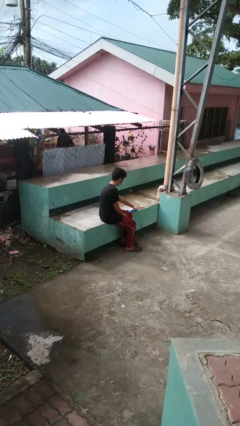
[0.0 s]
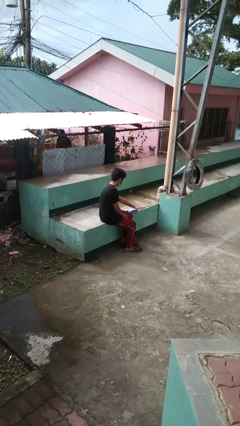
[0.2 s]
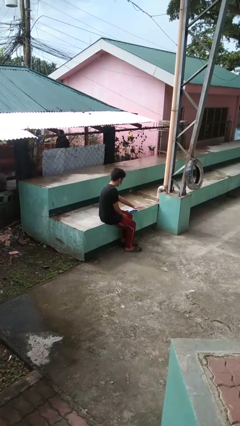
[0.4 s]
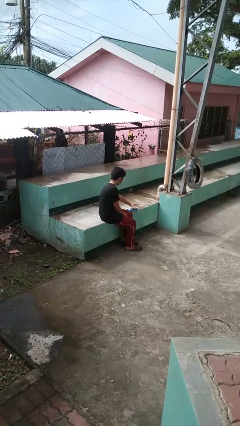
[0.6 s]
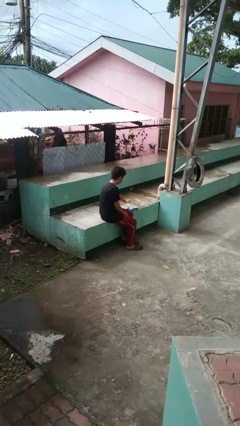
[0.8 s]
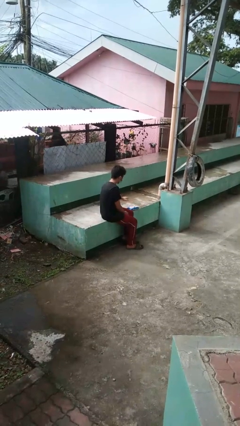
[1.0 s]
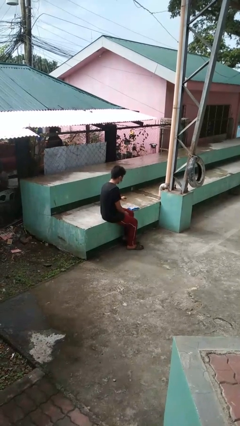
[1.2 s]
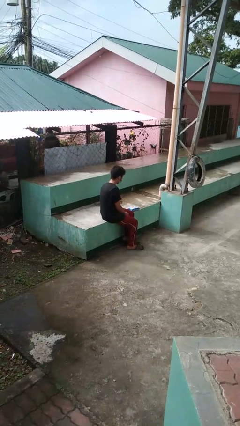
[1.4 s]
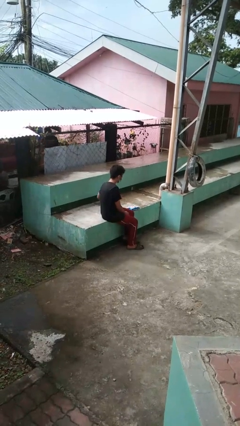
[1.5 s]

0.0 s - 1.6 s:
person waves hand over object

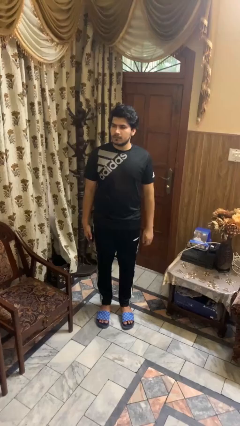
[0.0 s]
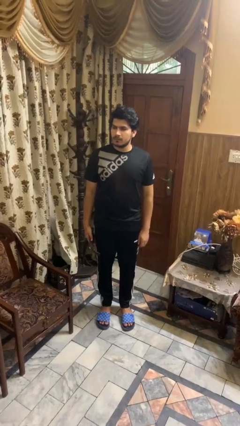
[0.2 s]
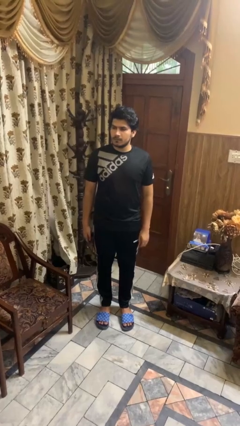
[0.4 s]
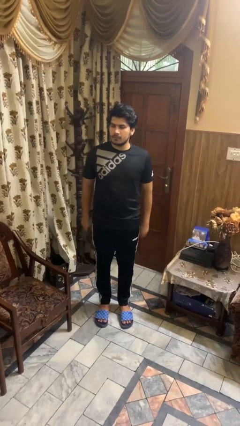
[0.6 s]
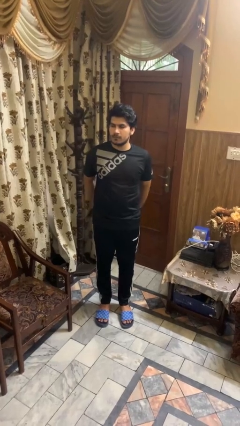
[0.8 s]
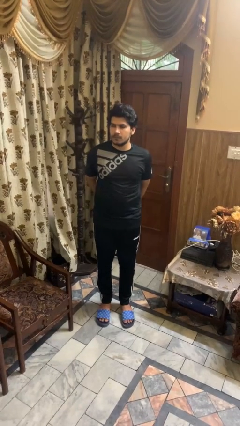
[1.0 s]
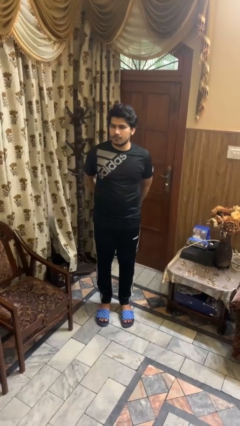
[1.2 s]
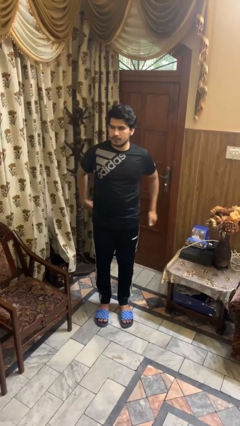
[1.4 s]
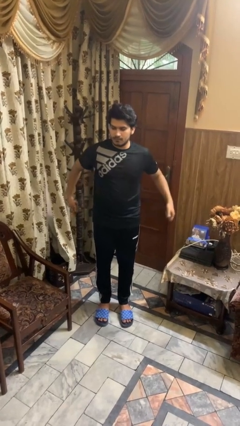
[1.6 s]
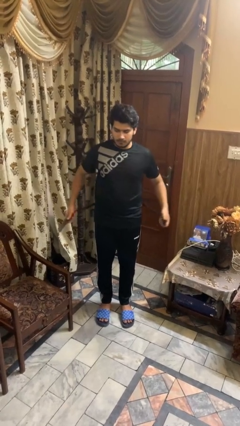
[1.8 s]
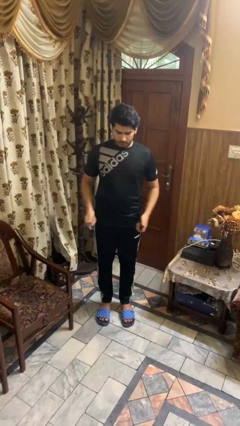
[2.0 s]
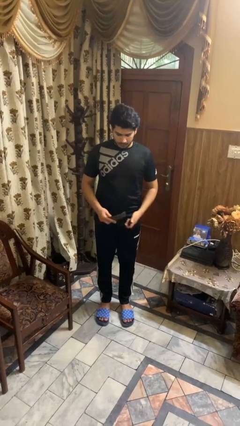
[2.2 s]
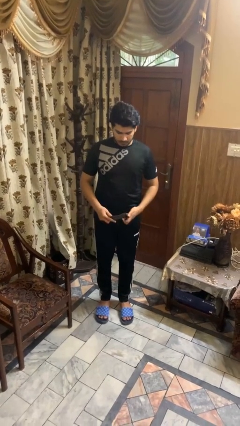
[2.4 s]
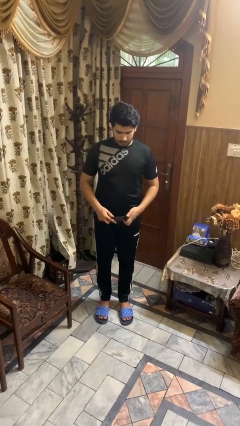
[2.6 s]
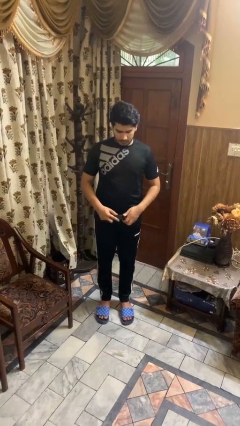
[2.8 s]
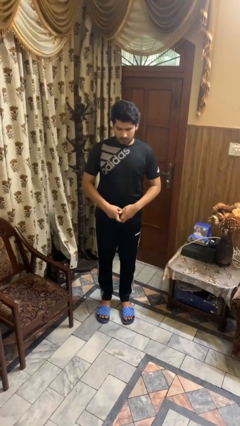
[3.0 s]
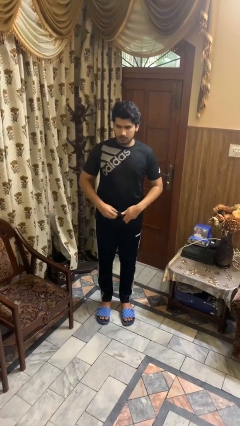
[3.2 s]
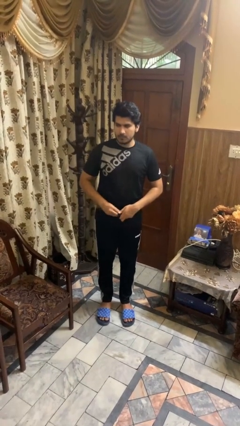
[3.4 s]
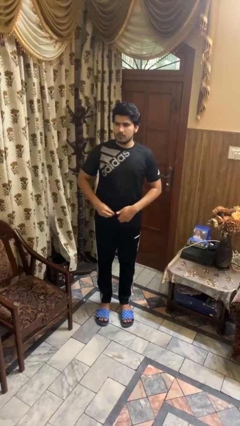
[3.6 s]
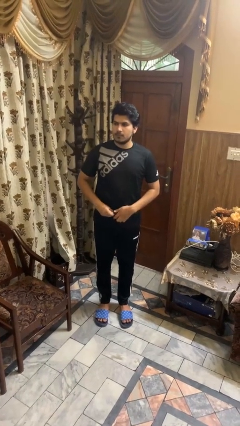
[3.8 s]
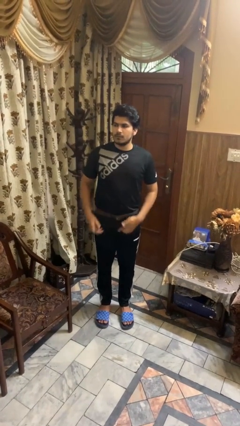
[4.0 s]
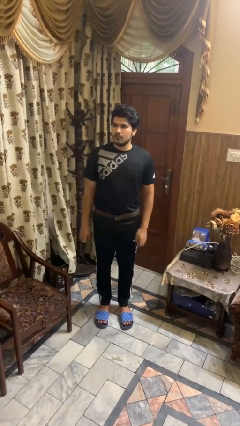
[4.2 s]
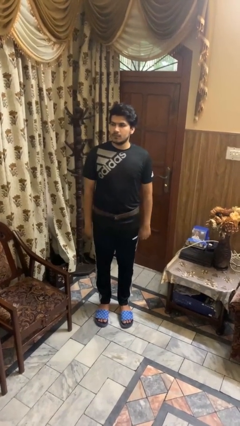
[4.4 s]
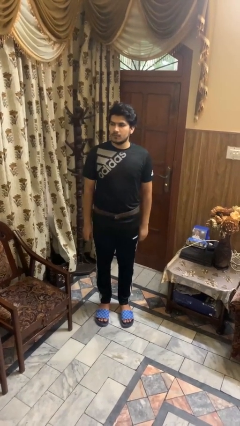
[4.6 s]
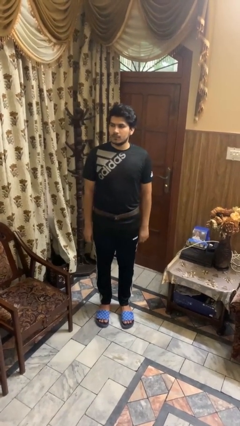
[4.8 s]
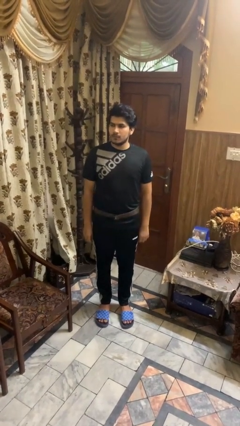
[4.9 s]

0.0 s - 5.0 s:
person puts on belt

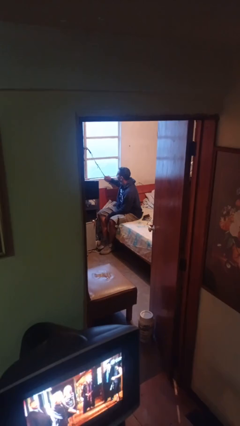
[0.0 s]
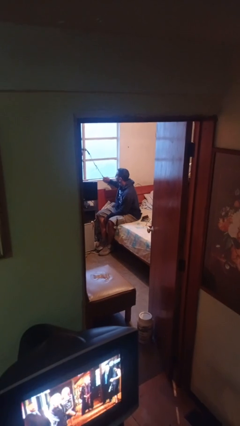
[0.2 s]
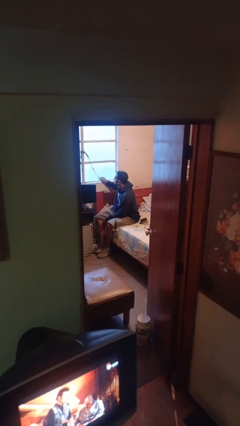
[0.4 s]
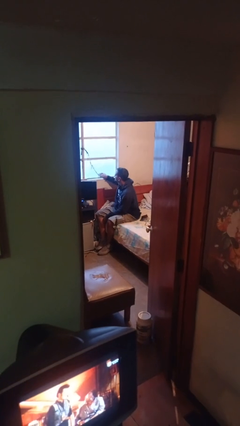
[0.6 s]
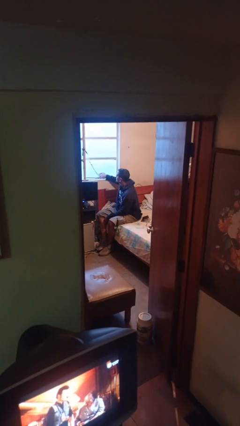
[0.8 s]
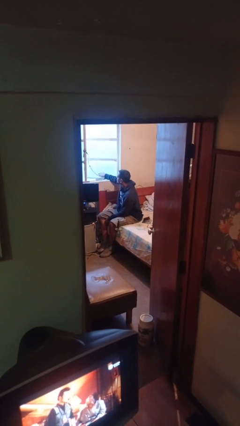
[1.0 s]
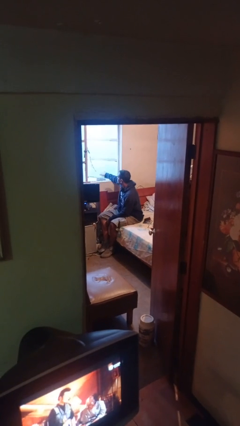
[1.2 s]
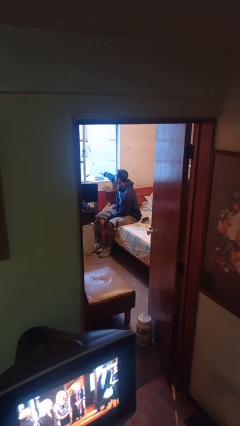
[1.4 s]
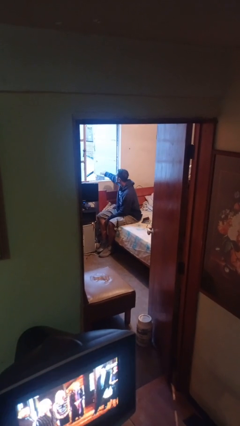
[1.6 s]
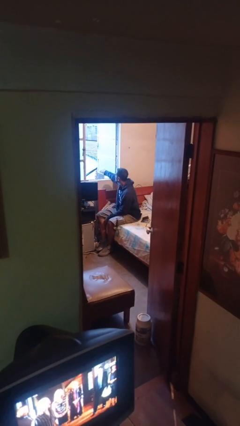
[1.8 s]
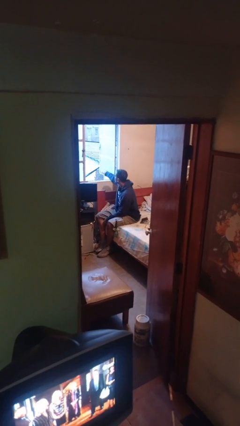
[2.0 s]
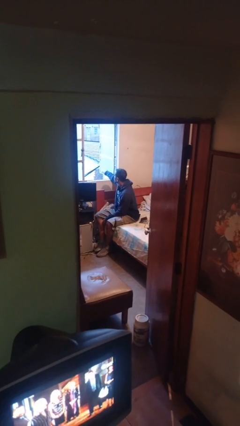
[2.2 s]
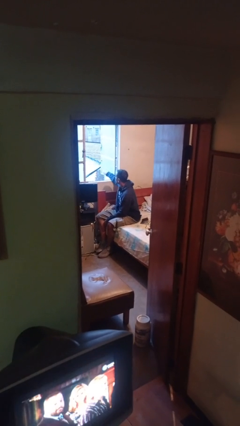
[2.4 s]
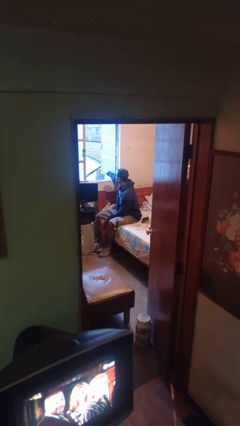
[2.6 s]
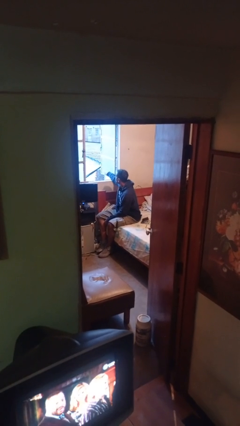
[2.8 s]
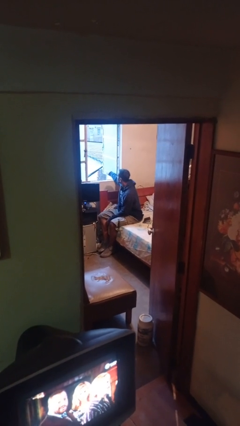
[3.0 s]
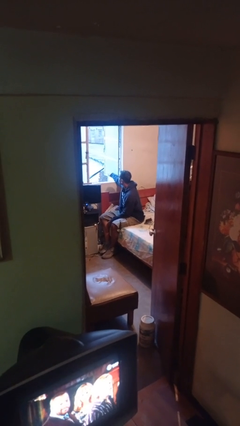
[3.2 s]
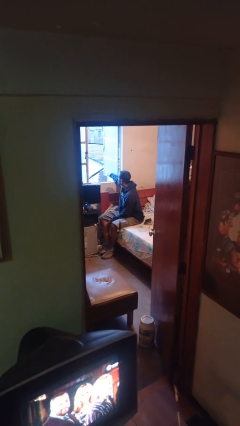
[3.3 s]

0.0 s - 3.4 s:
person opens home window

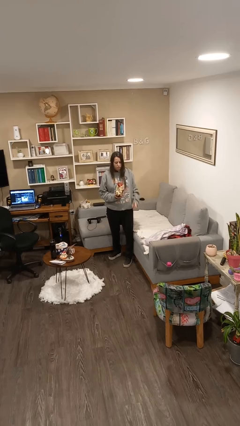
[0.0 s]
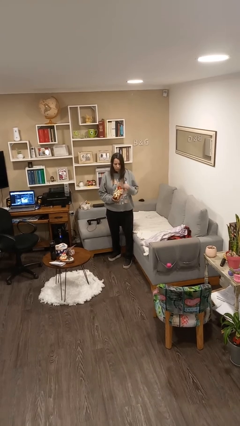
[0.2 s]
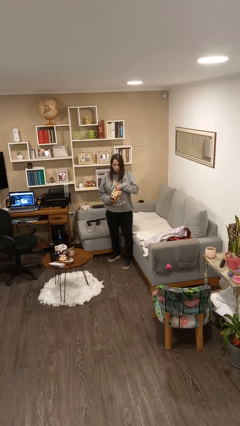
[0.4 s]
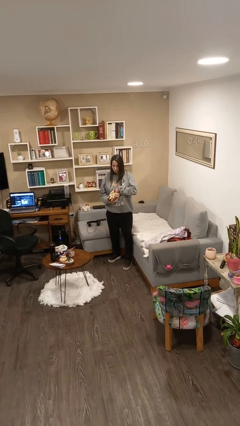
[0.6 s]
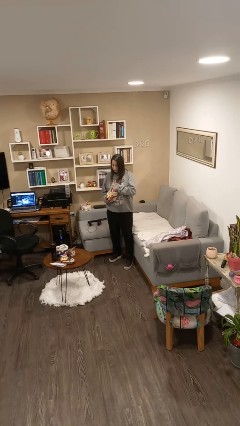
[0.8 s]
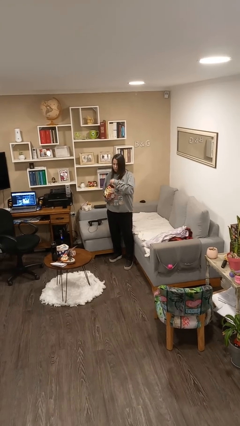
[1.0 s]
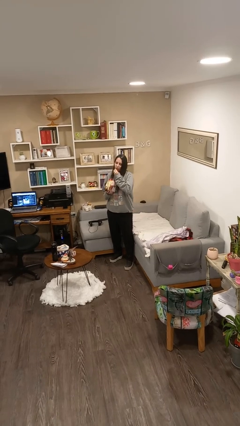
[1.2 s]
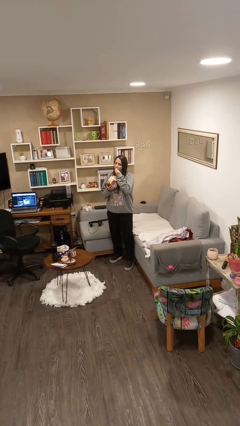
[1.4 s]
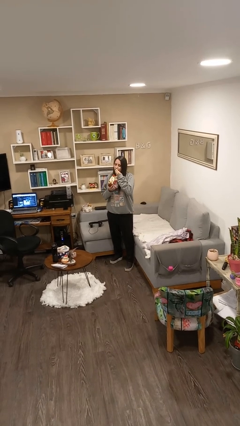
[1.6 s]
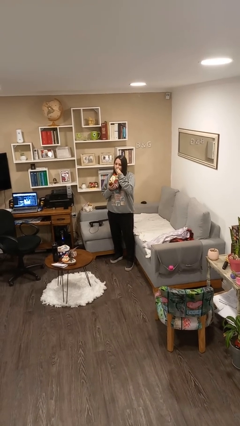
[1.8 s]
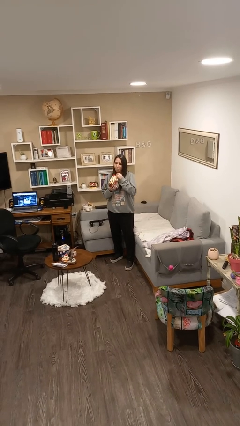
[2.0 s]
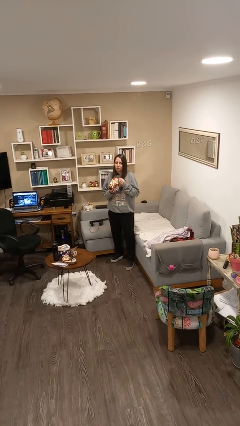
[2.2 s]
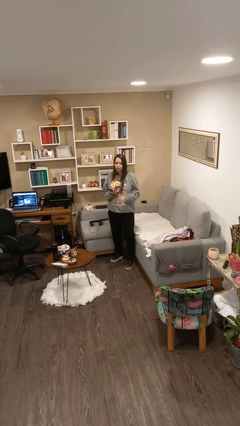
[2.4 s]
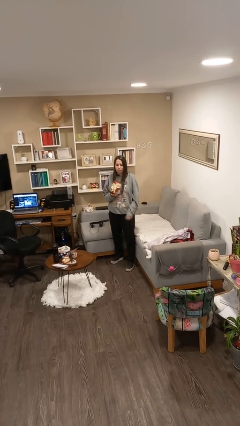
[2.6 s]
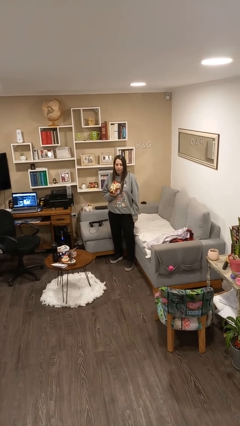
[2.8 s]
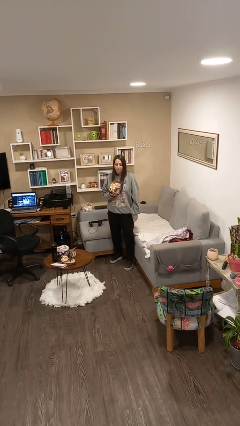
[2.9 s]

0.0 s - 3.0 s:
person eats snack from bag

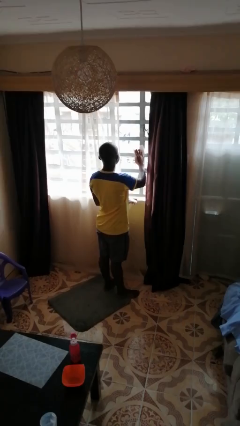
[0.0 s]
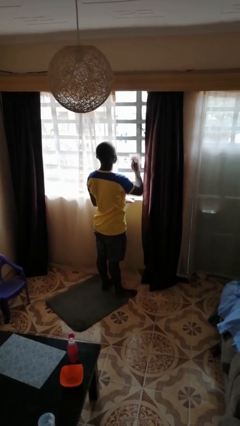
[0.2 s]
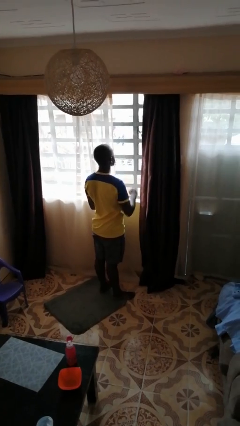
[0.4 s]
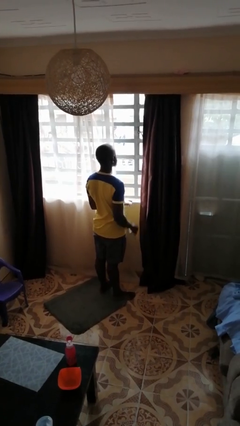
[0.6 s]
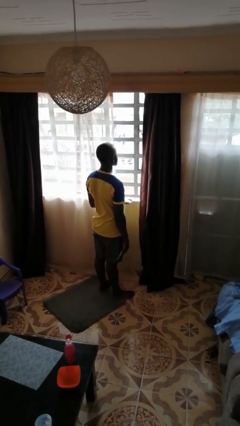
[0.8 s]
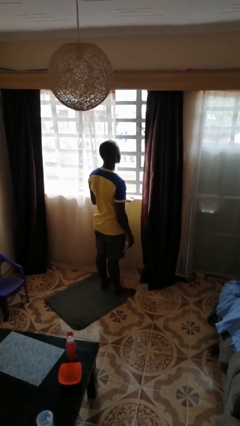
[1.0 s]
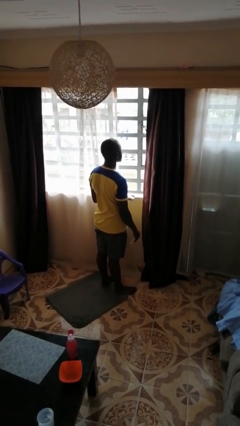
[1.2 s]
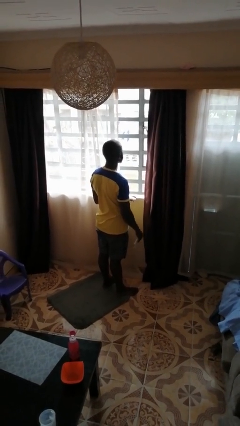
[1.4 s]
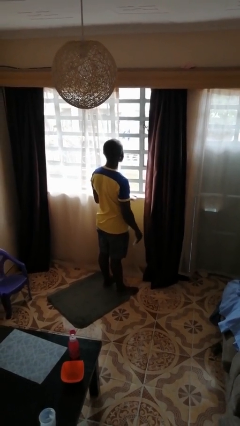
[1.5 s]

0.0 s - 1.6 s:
person washes window

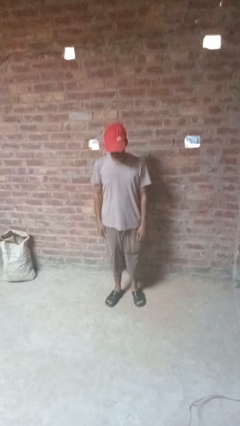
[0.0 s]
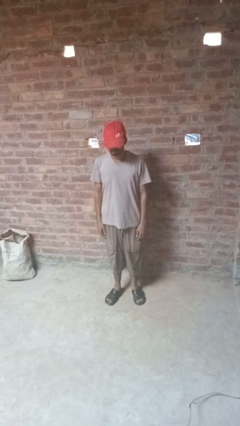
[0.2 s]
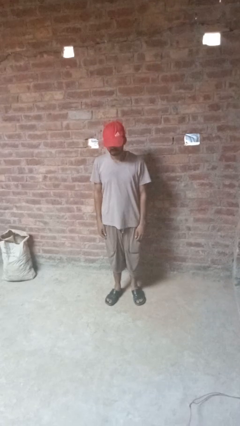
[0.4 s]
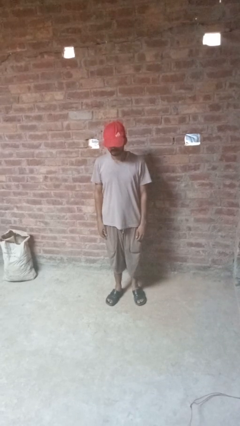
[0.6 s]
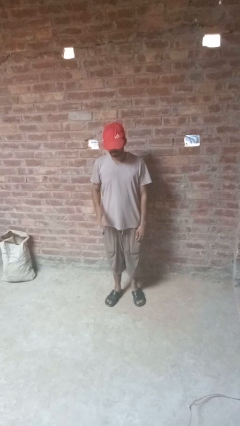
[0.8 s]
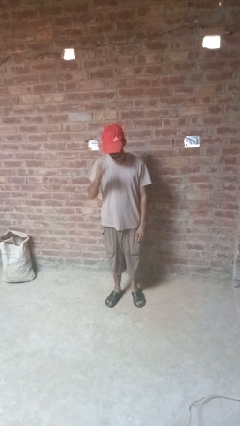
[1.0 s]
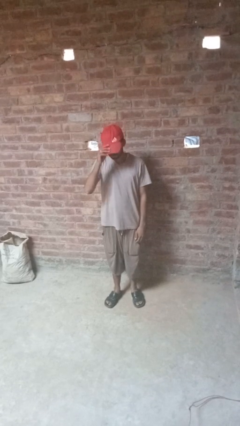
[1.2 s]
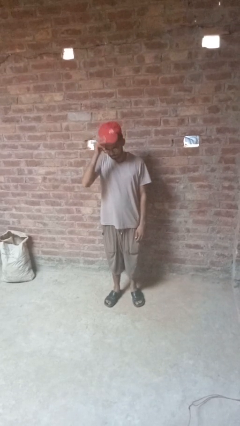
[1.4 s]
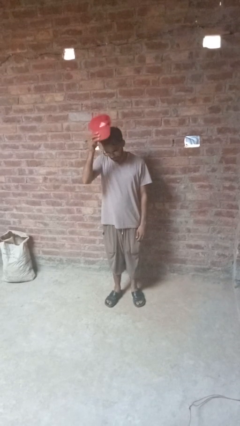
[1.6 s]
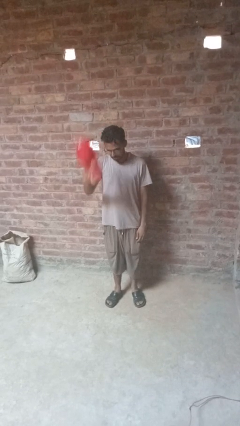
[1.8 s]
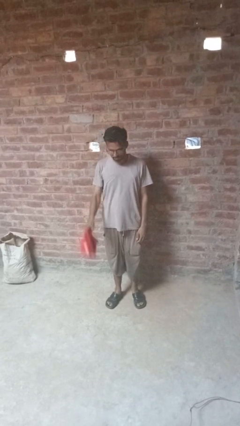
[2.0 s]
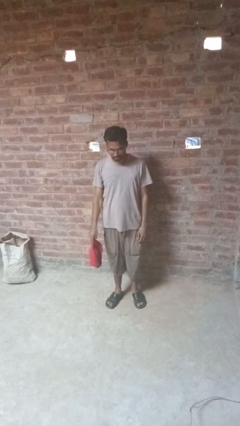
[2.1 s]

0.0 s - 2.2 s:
person takes off hat

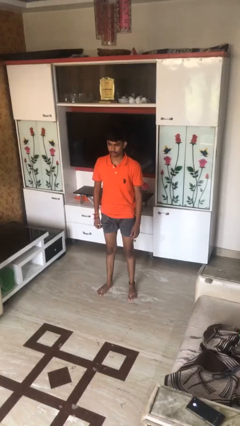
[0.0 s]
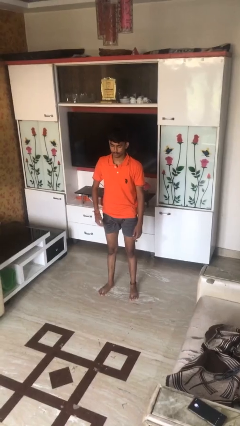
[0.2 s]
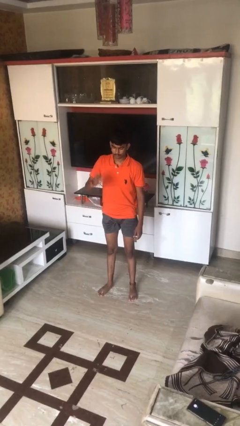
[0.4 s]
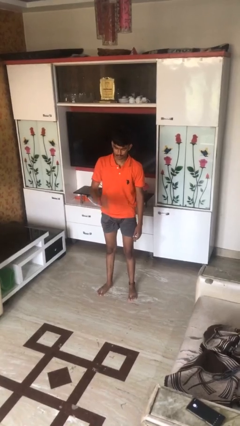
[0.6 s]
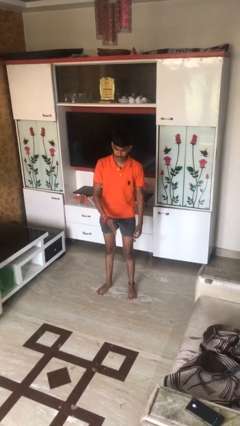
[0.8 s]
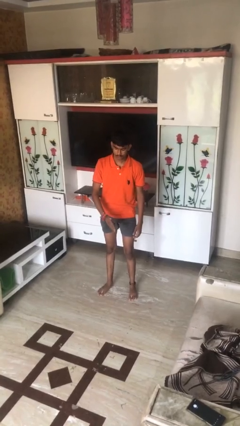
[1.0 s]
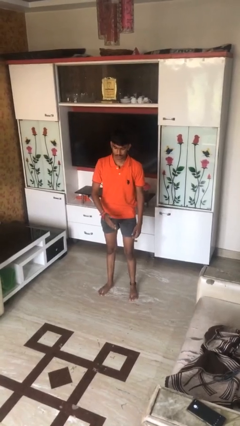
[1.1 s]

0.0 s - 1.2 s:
person karate chop
